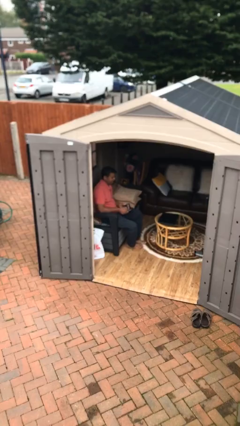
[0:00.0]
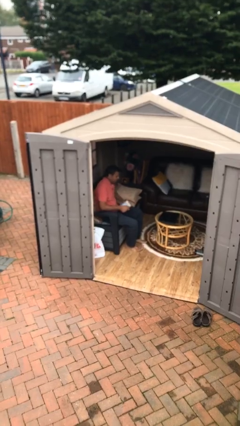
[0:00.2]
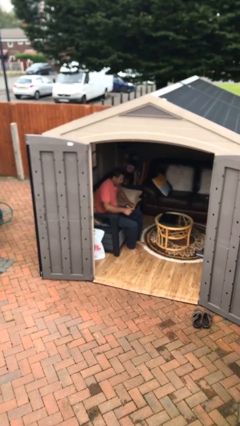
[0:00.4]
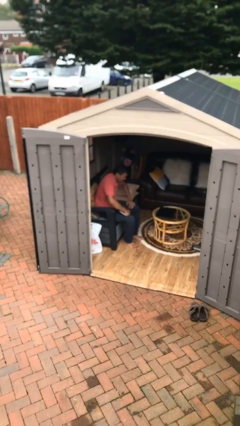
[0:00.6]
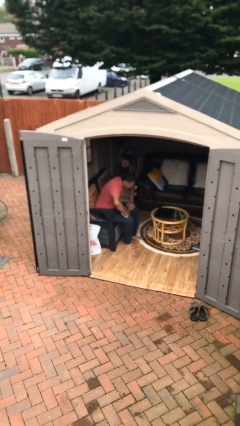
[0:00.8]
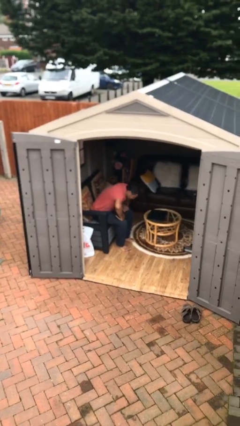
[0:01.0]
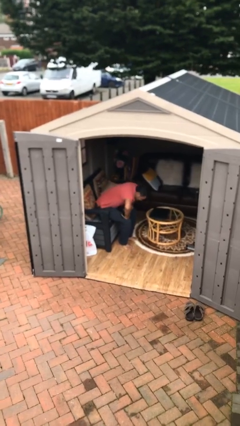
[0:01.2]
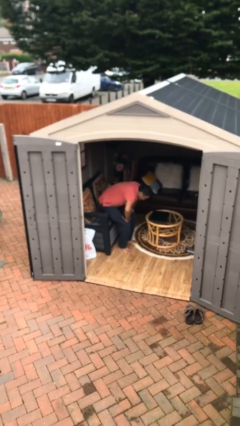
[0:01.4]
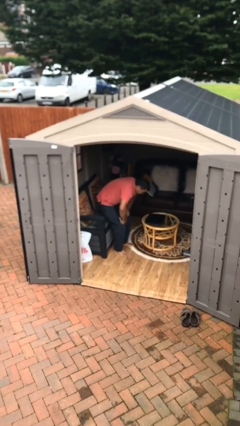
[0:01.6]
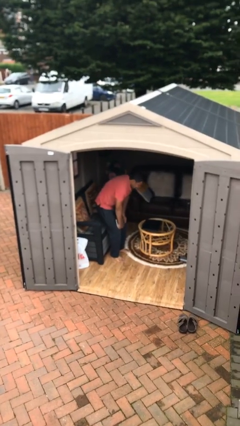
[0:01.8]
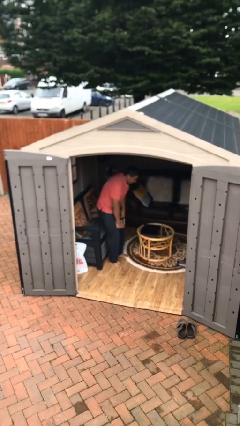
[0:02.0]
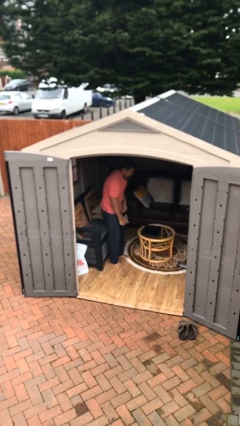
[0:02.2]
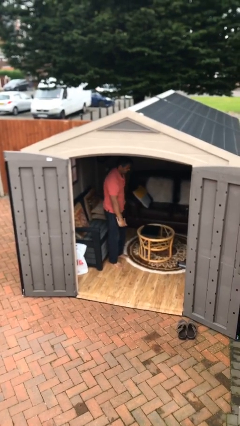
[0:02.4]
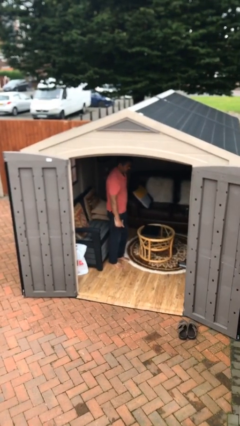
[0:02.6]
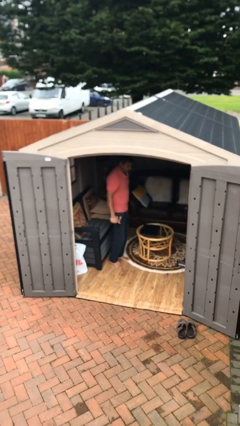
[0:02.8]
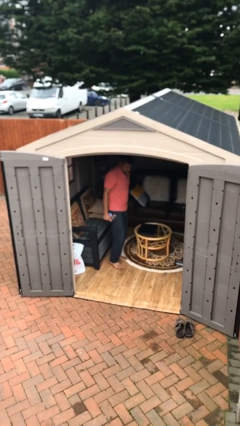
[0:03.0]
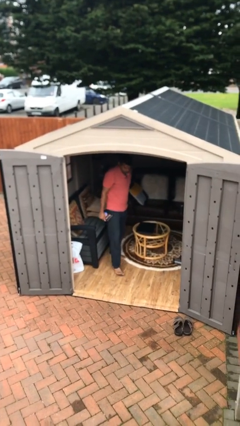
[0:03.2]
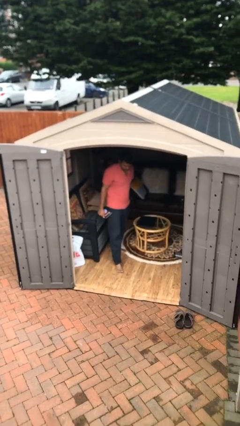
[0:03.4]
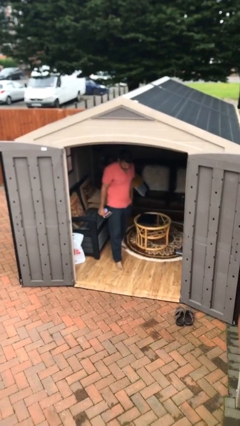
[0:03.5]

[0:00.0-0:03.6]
person stands up

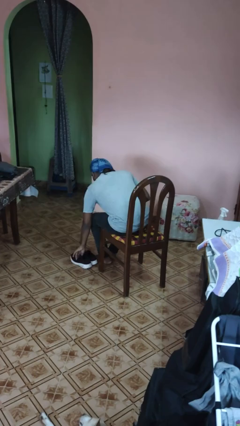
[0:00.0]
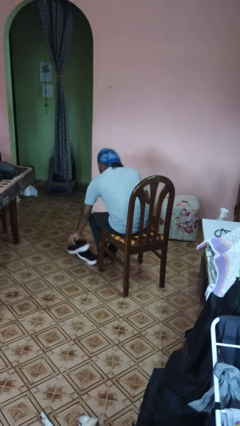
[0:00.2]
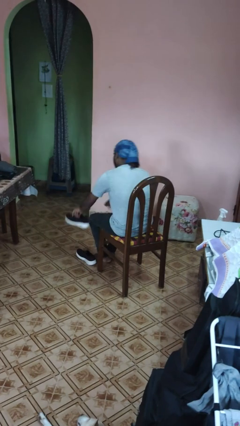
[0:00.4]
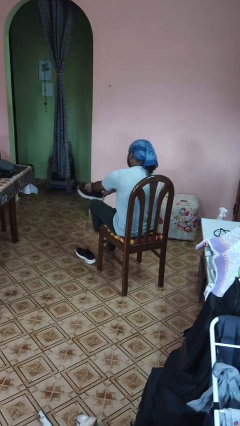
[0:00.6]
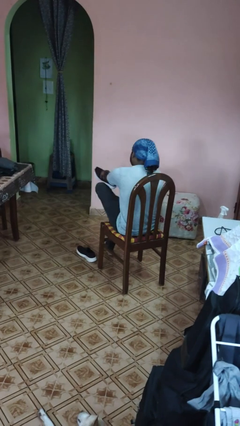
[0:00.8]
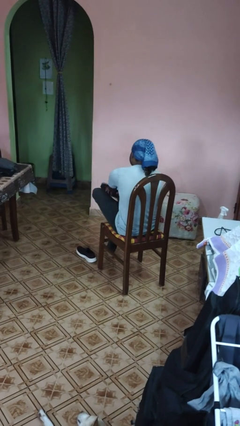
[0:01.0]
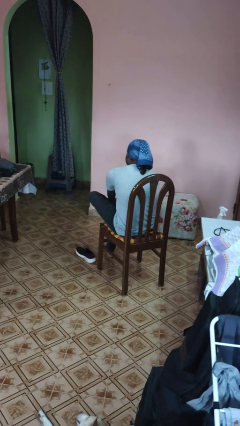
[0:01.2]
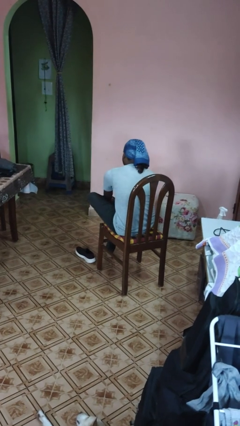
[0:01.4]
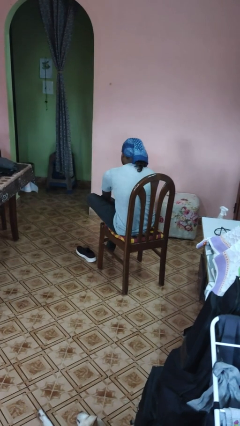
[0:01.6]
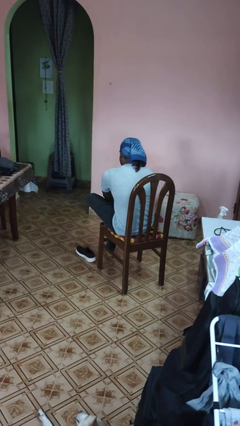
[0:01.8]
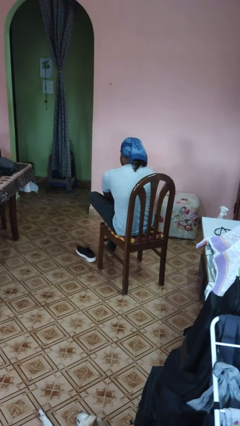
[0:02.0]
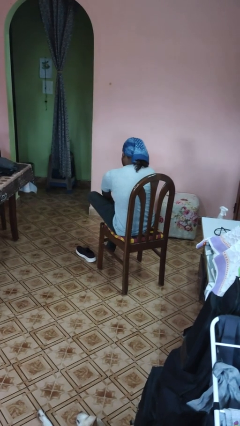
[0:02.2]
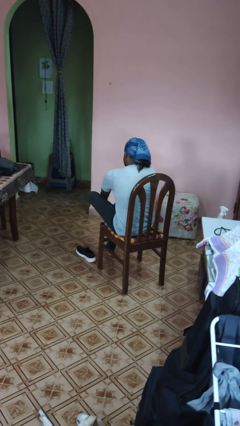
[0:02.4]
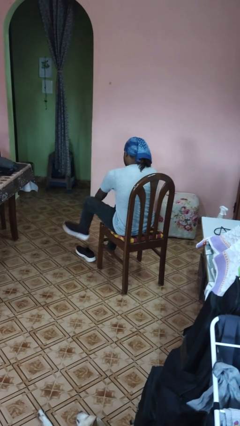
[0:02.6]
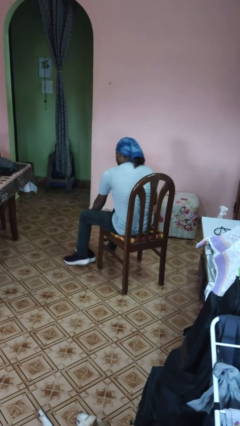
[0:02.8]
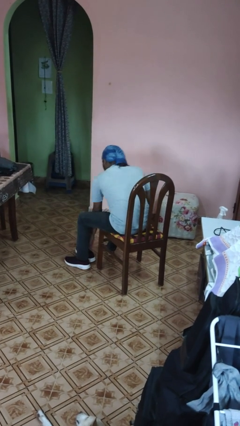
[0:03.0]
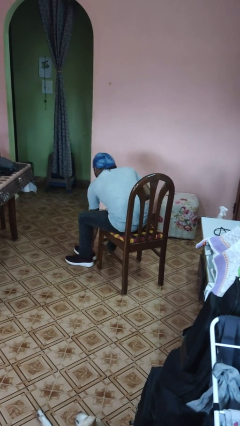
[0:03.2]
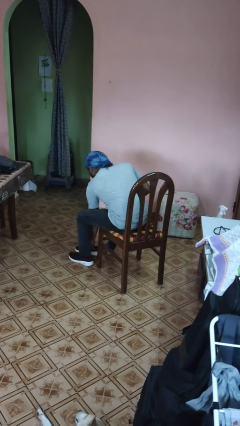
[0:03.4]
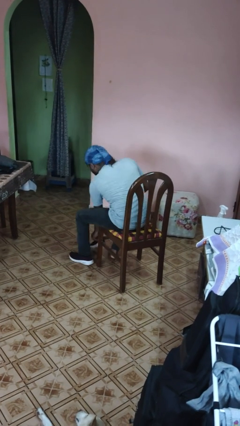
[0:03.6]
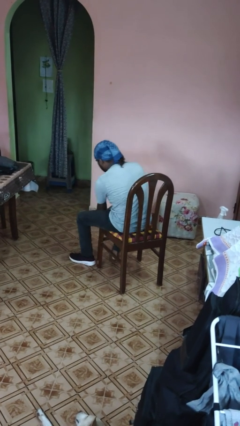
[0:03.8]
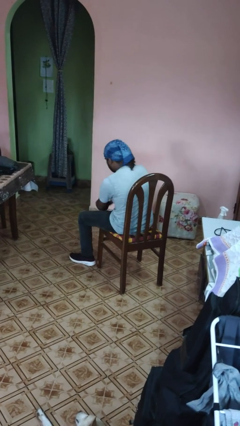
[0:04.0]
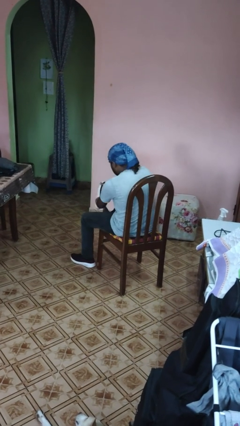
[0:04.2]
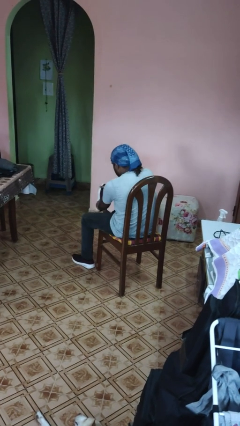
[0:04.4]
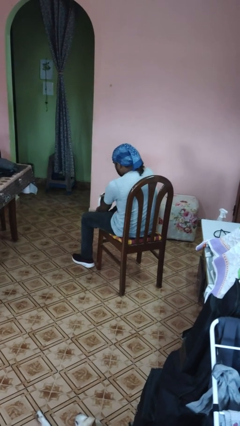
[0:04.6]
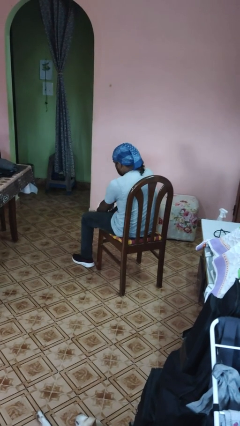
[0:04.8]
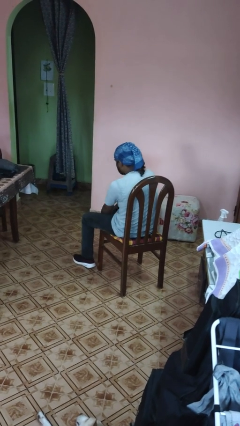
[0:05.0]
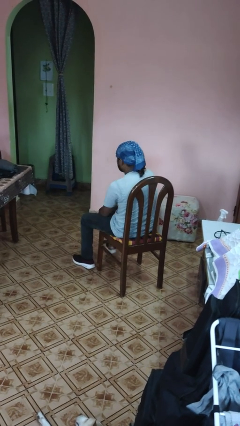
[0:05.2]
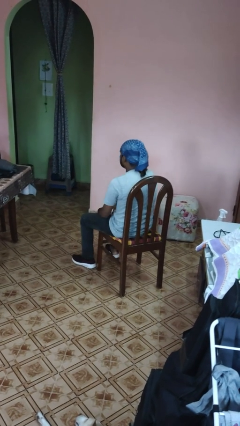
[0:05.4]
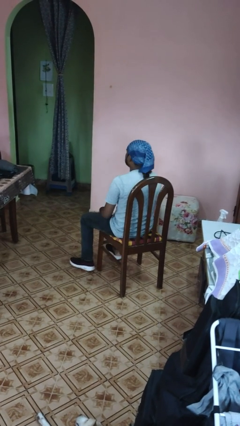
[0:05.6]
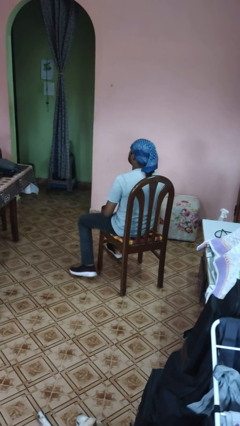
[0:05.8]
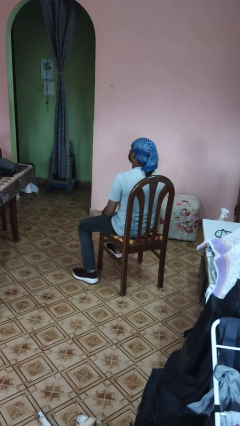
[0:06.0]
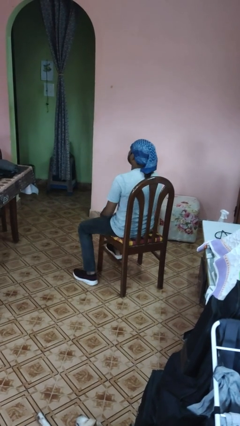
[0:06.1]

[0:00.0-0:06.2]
person puts on shoes

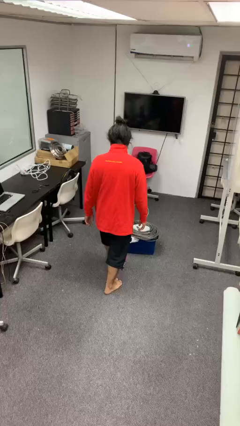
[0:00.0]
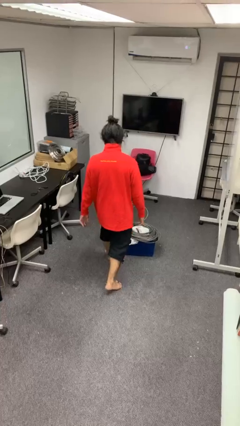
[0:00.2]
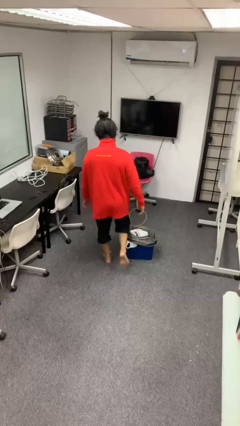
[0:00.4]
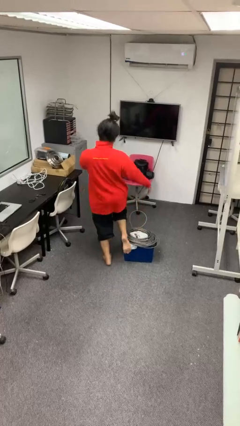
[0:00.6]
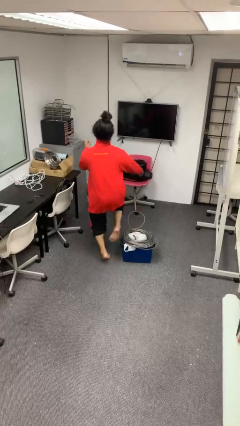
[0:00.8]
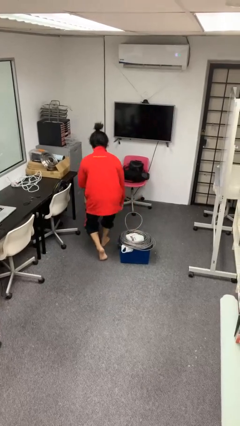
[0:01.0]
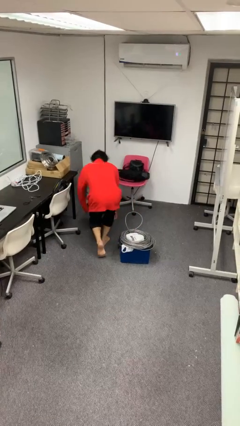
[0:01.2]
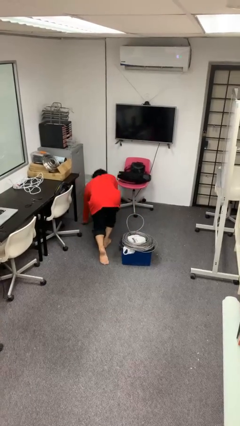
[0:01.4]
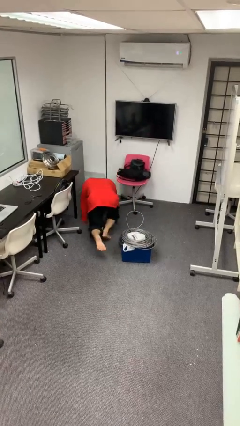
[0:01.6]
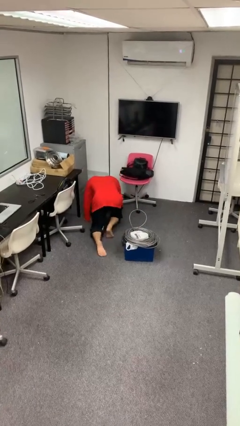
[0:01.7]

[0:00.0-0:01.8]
person trips on object on floor

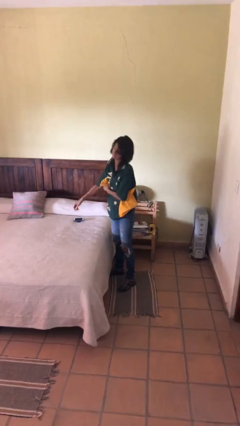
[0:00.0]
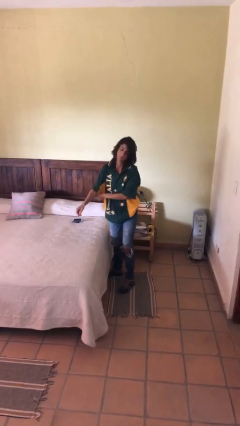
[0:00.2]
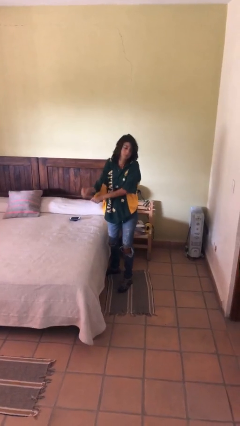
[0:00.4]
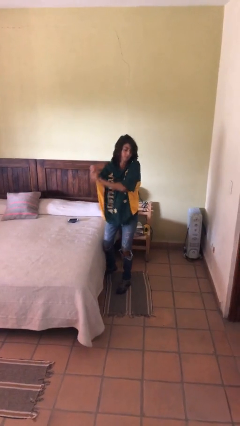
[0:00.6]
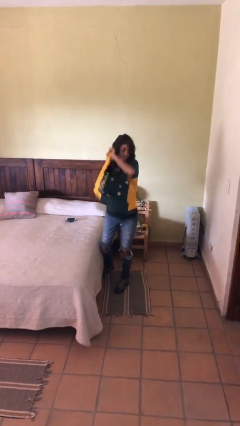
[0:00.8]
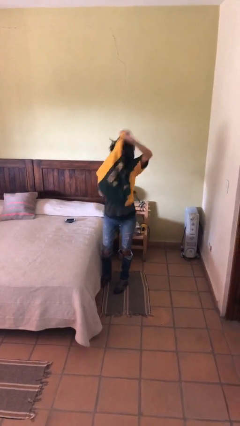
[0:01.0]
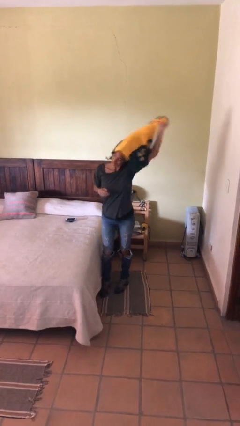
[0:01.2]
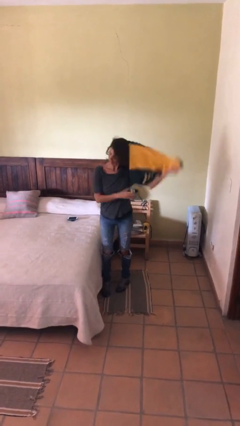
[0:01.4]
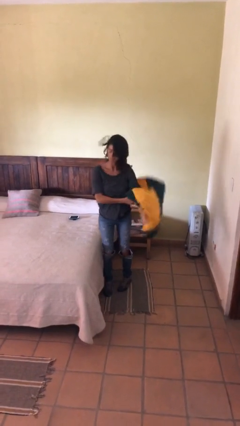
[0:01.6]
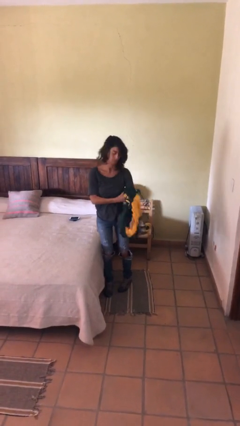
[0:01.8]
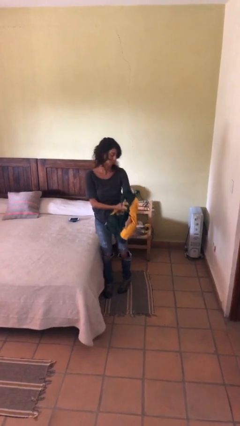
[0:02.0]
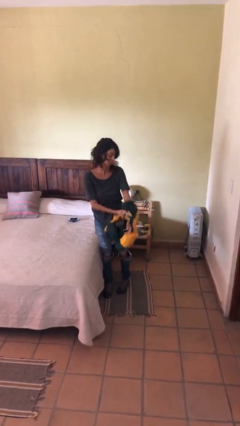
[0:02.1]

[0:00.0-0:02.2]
person takes off shirt

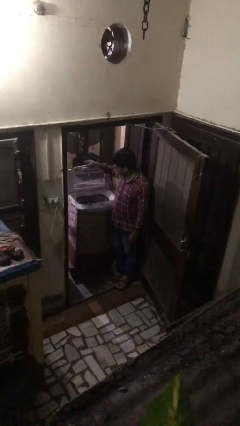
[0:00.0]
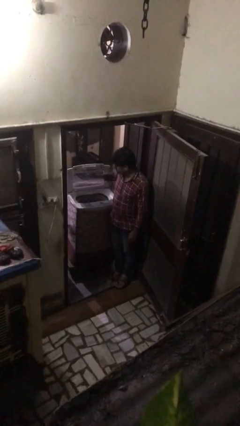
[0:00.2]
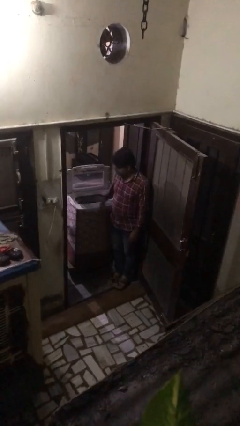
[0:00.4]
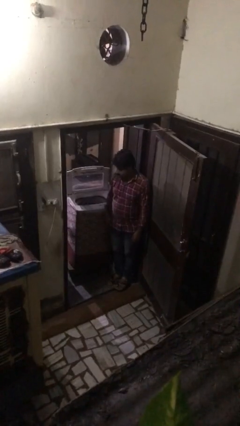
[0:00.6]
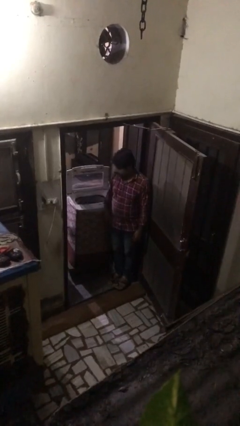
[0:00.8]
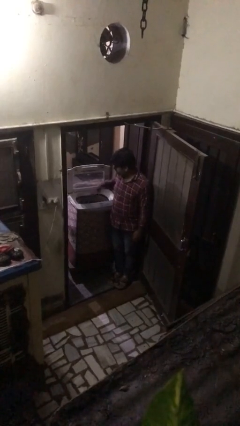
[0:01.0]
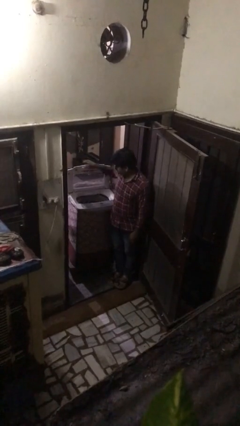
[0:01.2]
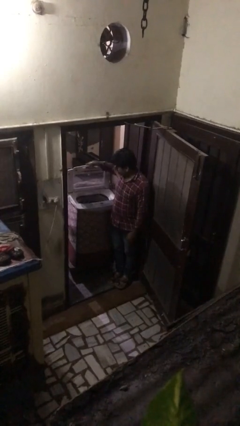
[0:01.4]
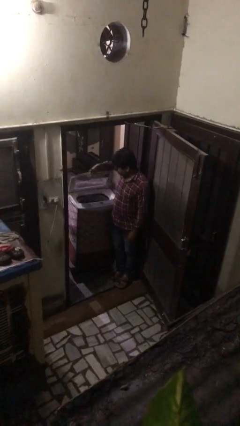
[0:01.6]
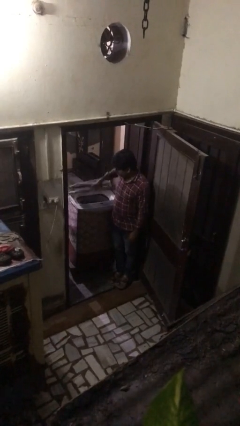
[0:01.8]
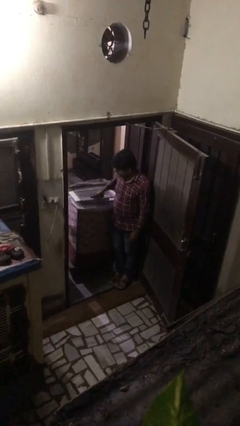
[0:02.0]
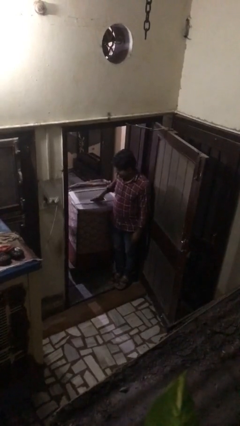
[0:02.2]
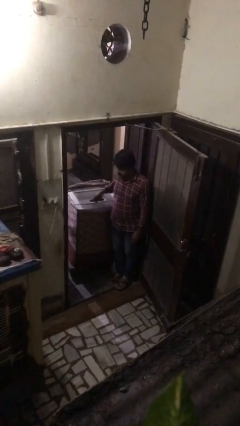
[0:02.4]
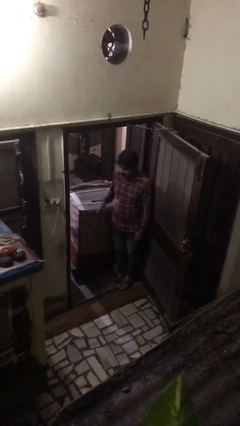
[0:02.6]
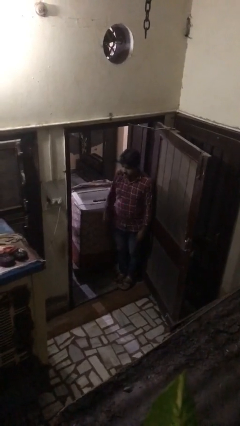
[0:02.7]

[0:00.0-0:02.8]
person closes clothes washer

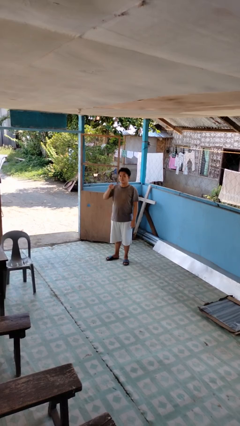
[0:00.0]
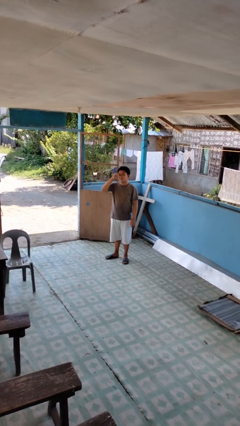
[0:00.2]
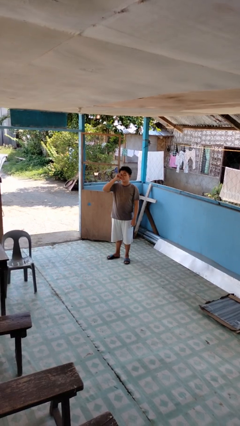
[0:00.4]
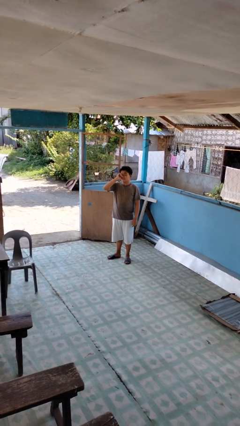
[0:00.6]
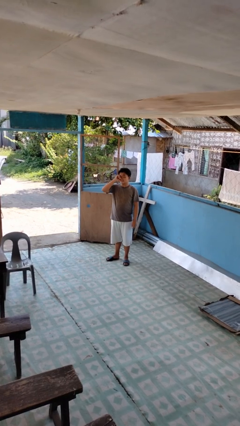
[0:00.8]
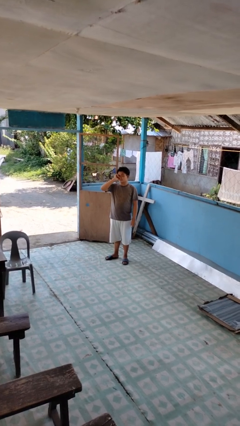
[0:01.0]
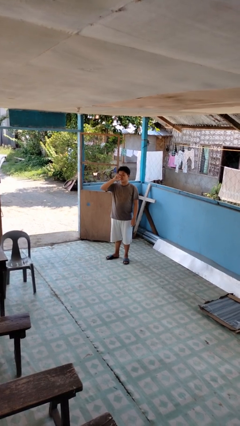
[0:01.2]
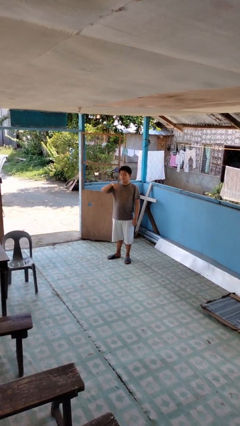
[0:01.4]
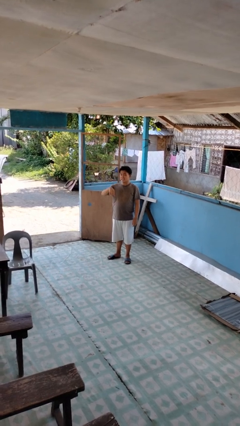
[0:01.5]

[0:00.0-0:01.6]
person rubs eyes
